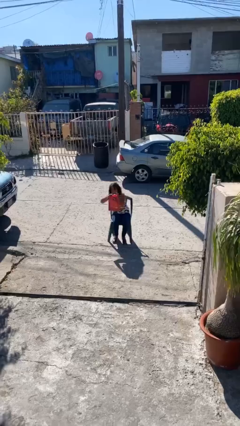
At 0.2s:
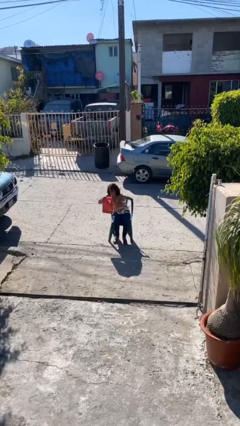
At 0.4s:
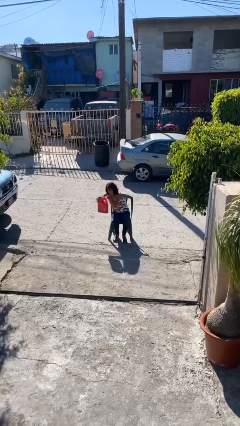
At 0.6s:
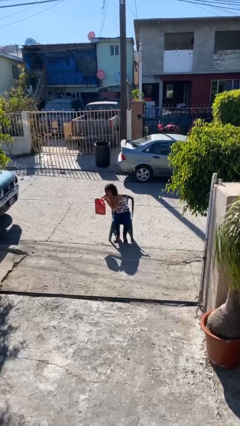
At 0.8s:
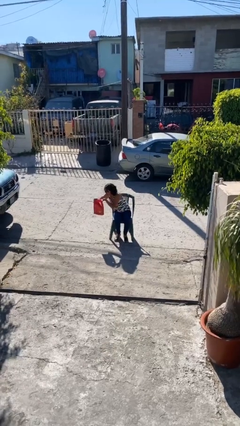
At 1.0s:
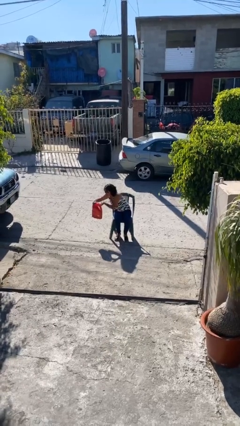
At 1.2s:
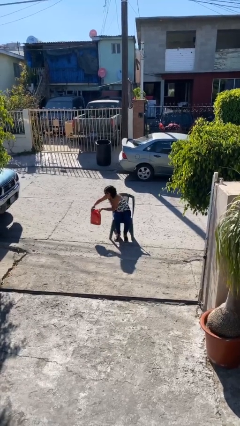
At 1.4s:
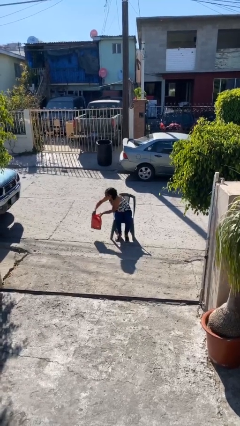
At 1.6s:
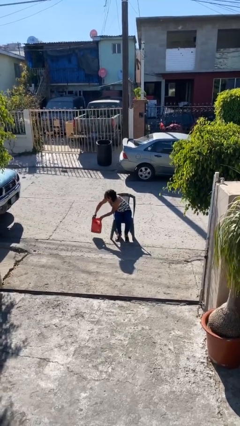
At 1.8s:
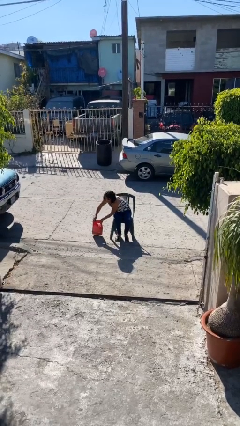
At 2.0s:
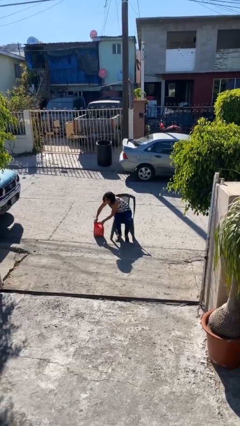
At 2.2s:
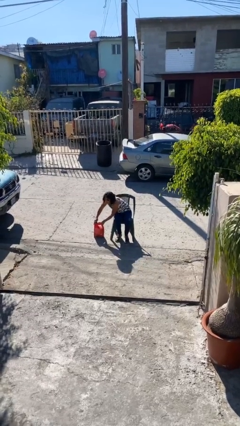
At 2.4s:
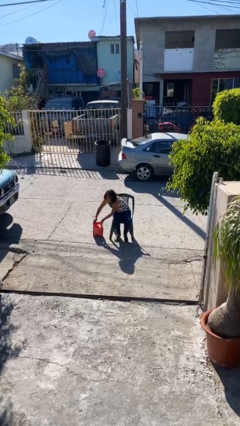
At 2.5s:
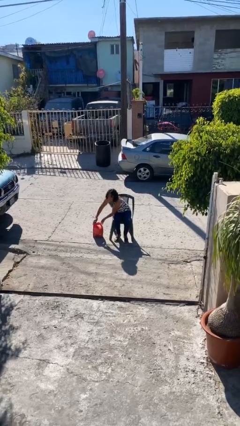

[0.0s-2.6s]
person puts down object on floor

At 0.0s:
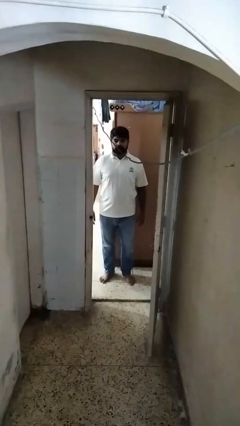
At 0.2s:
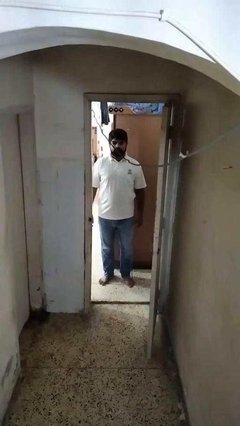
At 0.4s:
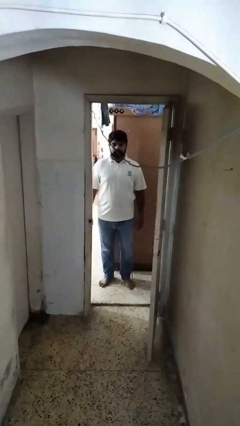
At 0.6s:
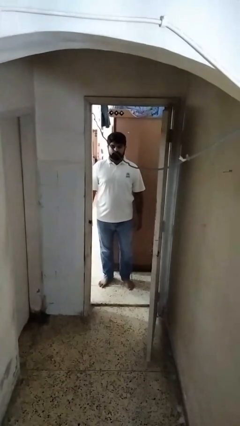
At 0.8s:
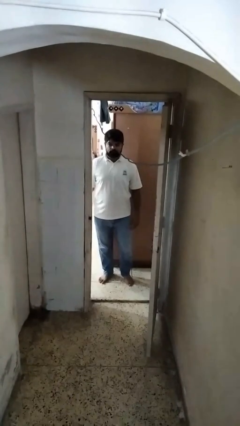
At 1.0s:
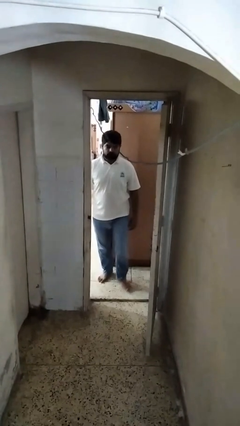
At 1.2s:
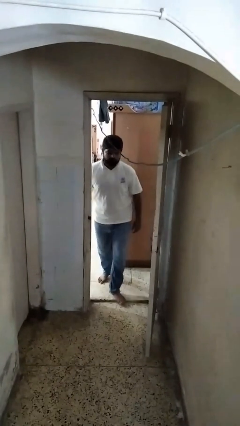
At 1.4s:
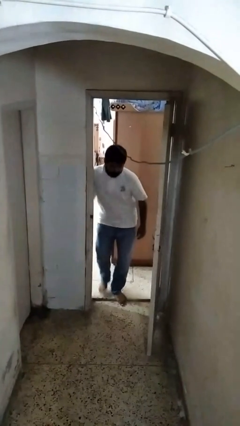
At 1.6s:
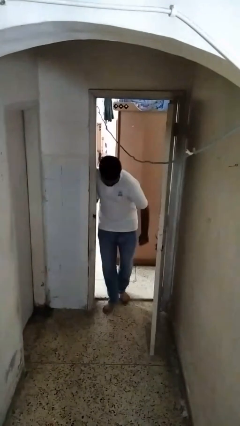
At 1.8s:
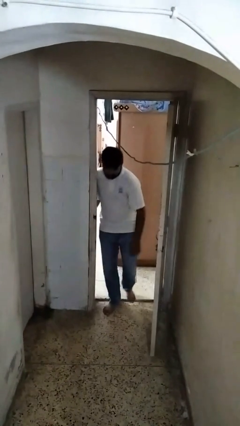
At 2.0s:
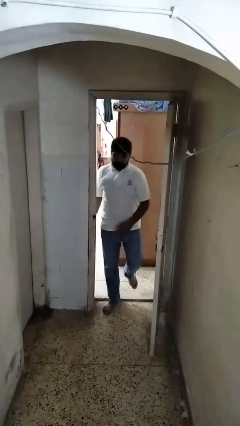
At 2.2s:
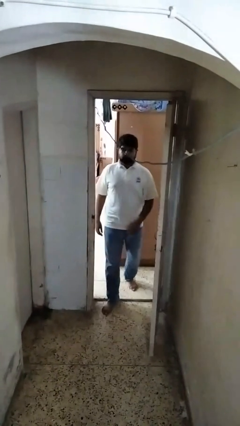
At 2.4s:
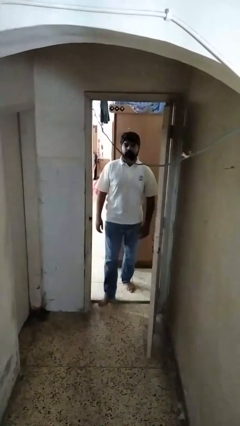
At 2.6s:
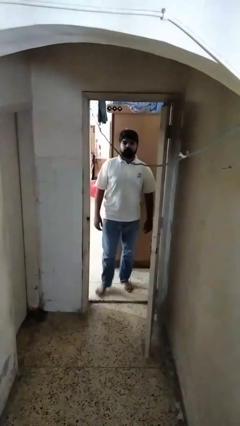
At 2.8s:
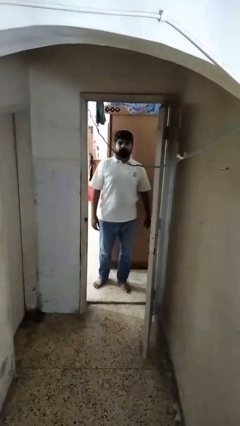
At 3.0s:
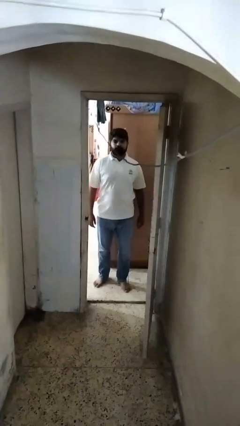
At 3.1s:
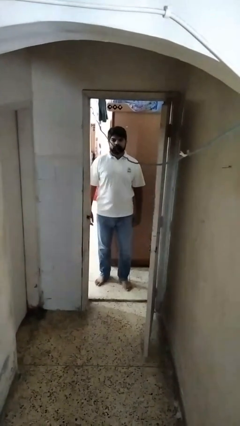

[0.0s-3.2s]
person bumps into wall

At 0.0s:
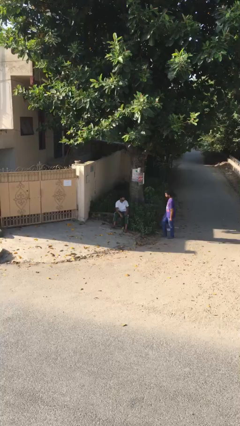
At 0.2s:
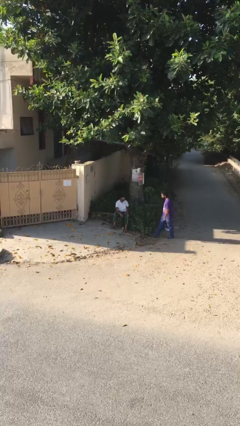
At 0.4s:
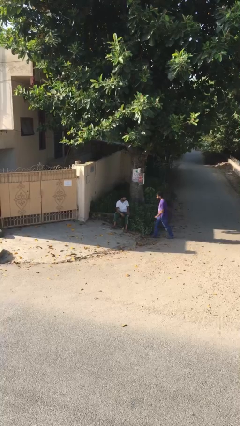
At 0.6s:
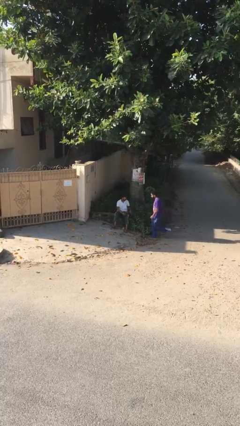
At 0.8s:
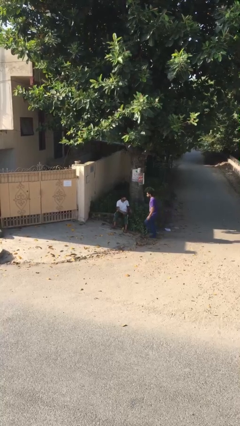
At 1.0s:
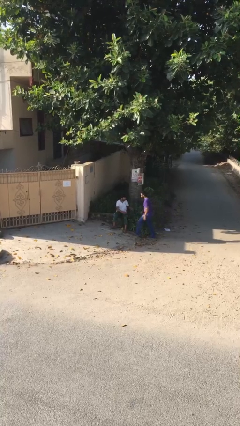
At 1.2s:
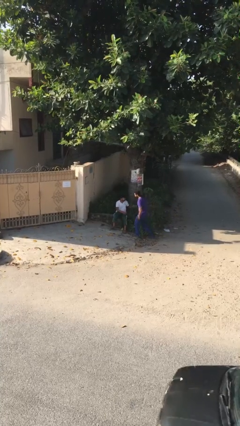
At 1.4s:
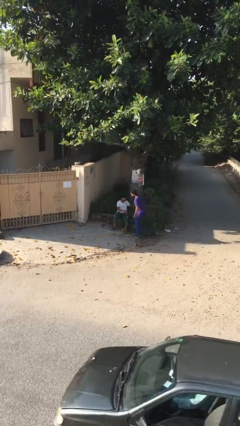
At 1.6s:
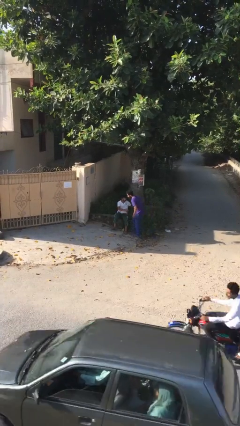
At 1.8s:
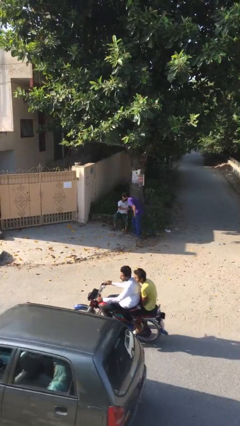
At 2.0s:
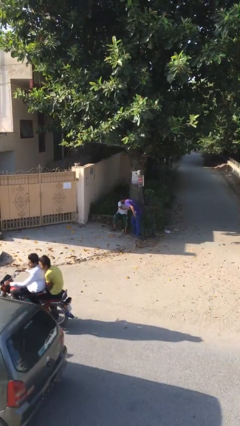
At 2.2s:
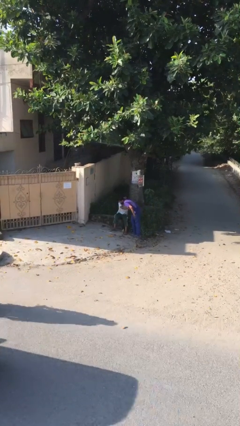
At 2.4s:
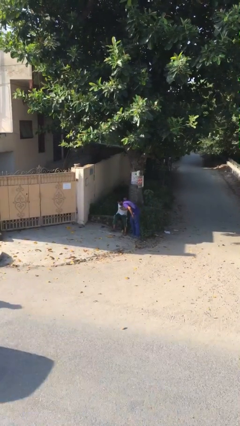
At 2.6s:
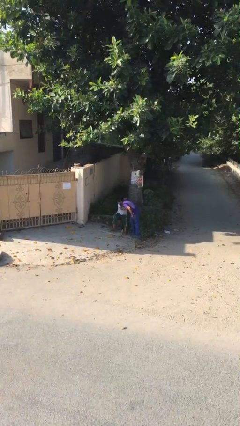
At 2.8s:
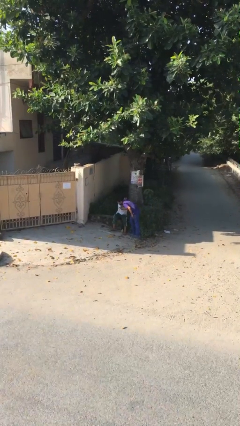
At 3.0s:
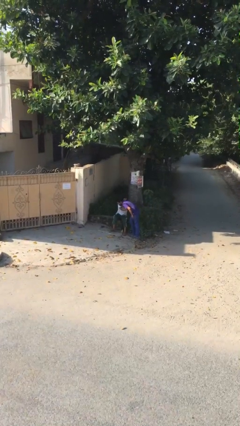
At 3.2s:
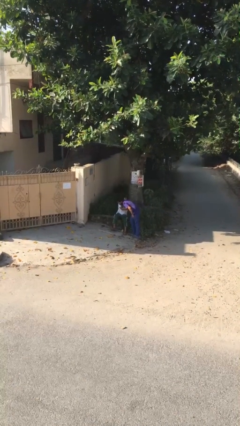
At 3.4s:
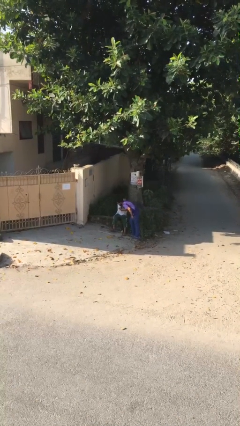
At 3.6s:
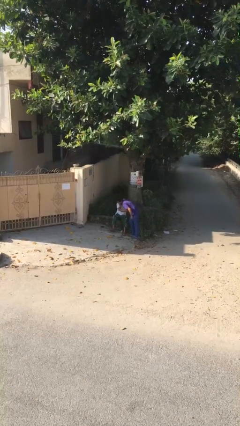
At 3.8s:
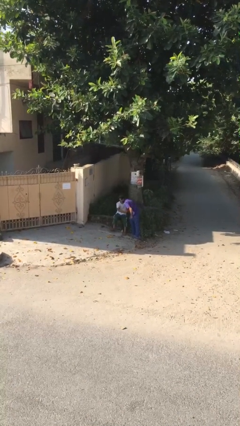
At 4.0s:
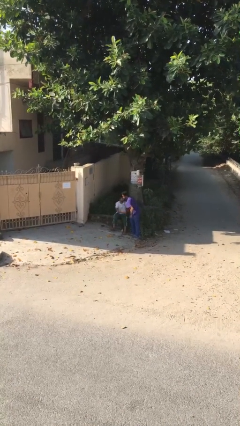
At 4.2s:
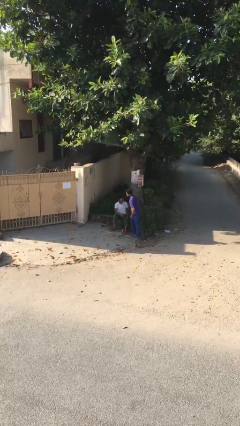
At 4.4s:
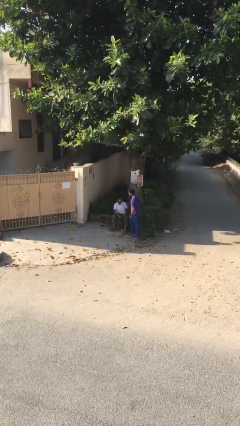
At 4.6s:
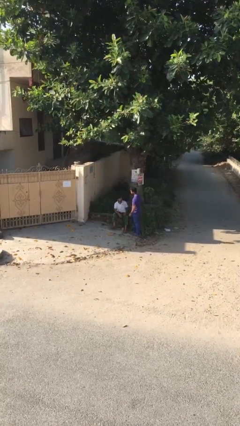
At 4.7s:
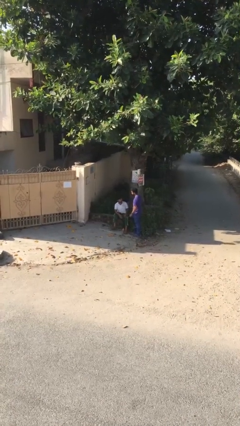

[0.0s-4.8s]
person embraces person

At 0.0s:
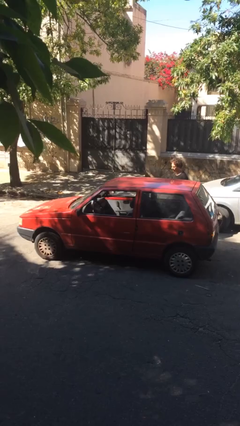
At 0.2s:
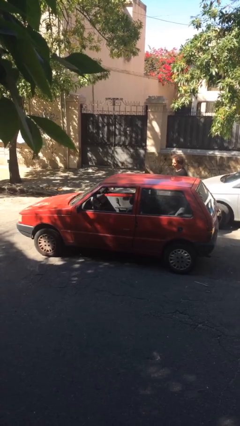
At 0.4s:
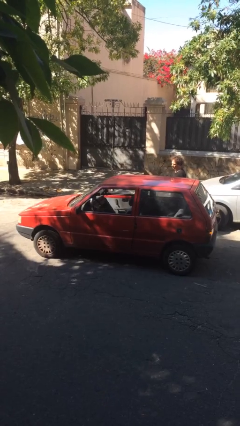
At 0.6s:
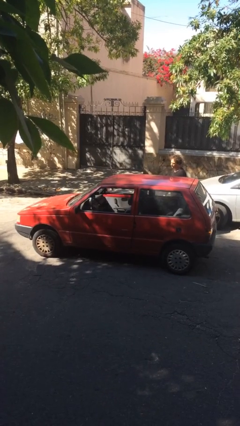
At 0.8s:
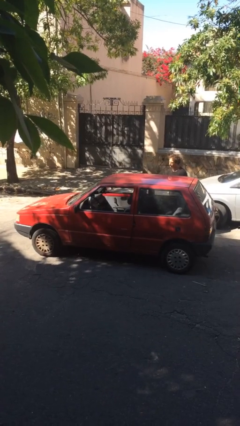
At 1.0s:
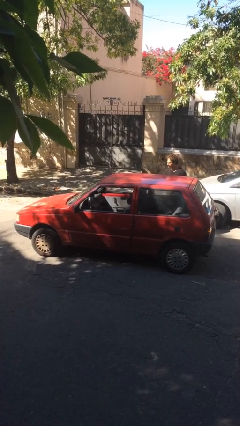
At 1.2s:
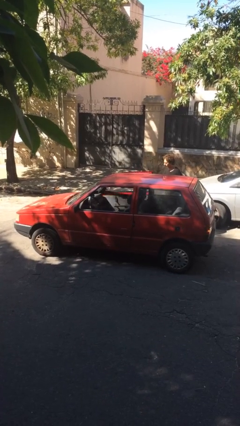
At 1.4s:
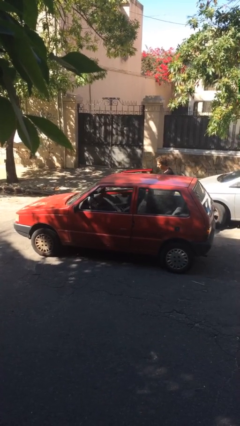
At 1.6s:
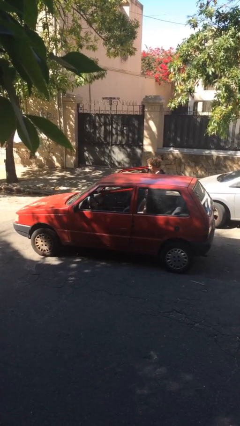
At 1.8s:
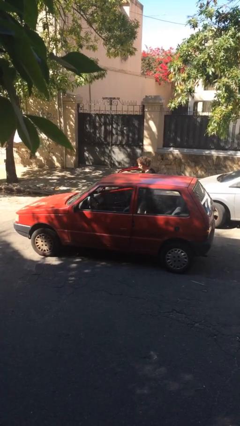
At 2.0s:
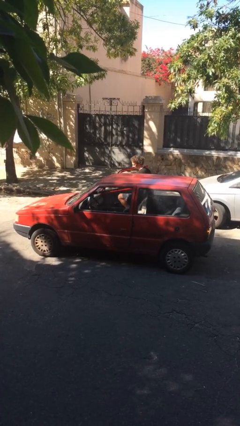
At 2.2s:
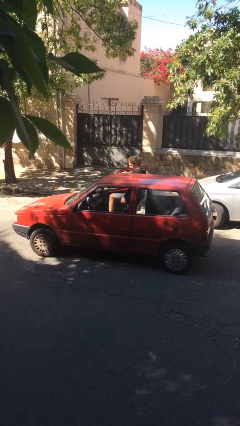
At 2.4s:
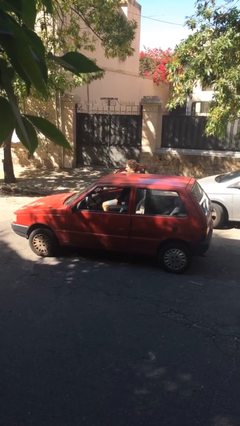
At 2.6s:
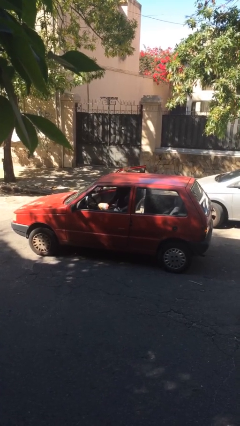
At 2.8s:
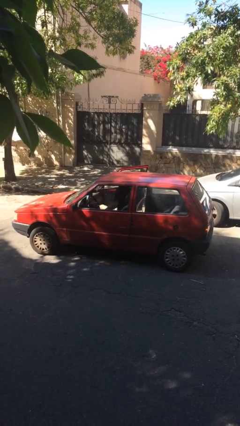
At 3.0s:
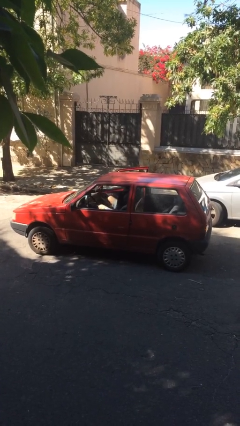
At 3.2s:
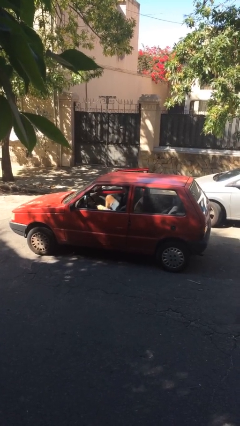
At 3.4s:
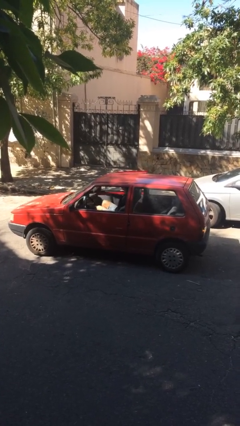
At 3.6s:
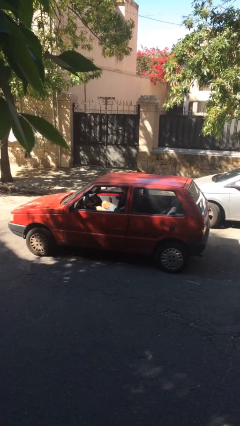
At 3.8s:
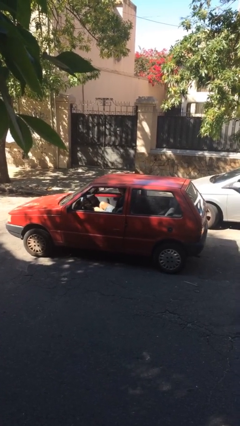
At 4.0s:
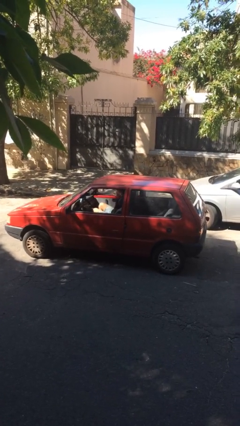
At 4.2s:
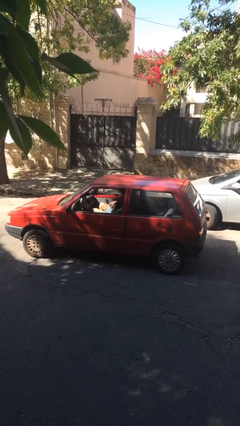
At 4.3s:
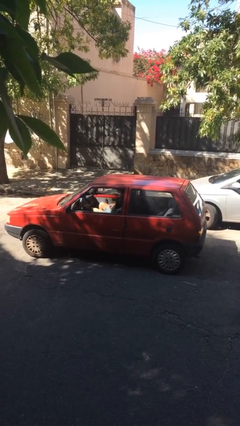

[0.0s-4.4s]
car picks up person

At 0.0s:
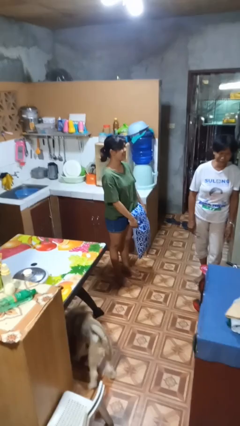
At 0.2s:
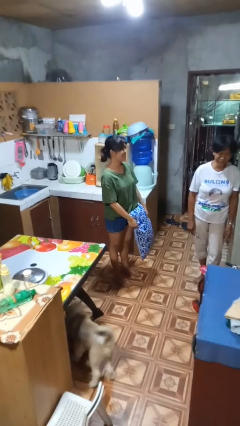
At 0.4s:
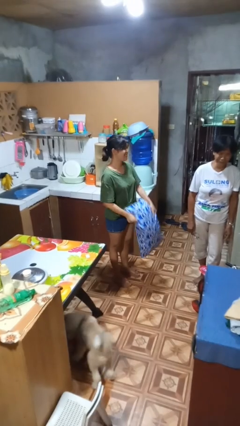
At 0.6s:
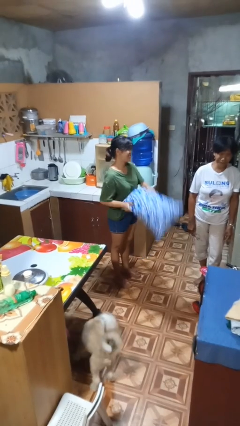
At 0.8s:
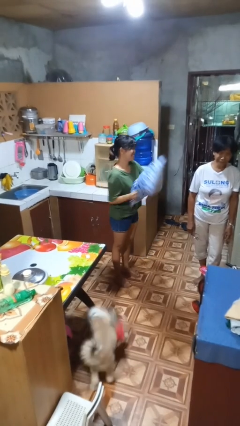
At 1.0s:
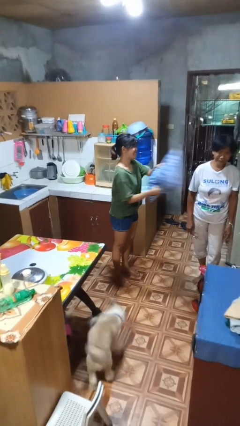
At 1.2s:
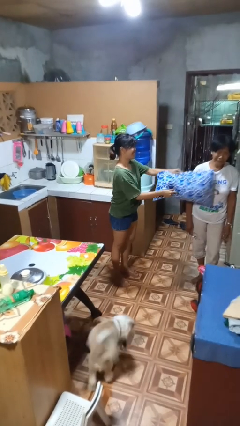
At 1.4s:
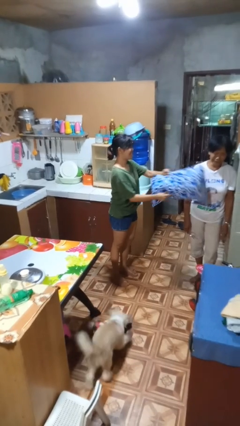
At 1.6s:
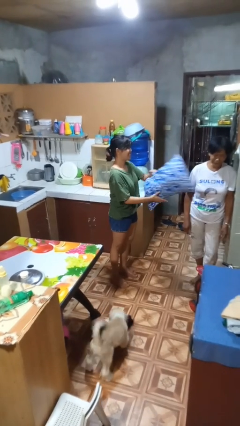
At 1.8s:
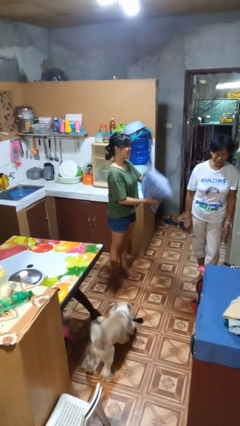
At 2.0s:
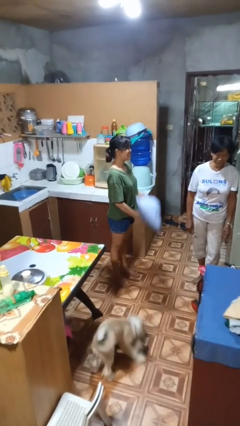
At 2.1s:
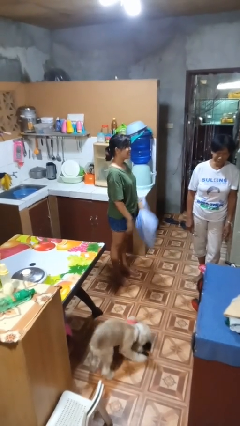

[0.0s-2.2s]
person hits person with pillow

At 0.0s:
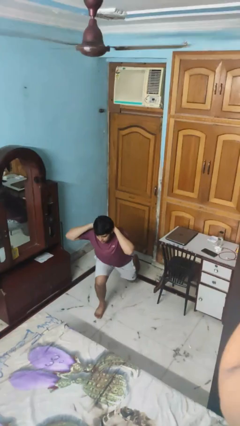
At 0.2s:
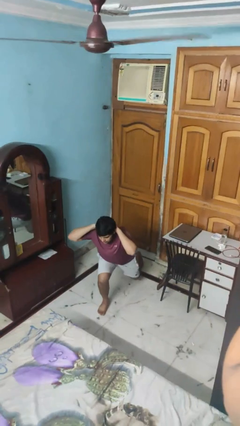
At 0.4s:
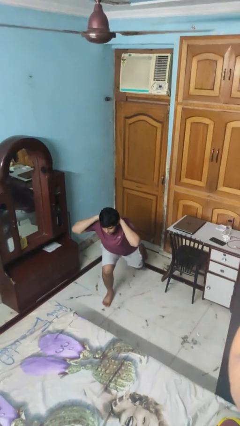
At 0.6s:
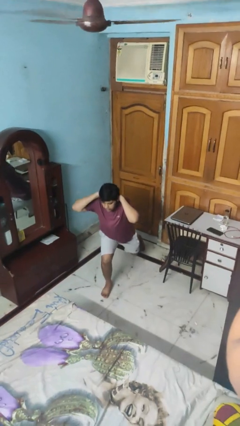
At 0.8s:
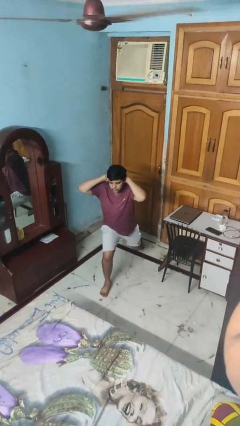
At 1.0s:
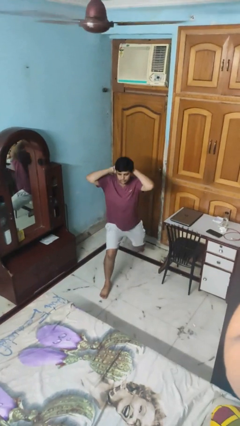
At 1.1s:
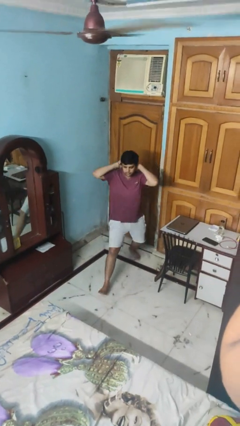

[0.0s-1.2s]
person exercises with lunges
